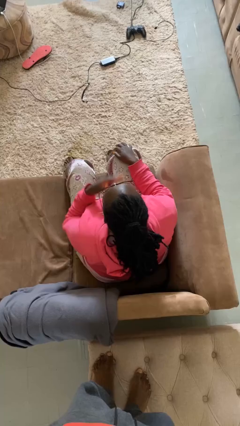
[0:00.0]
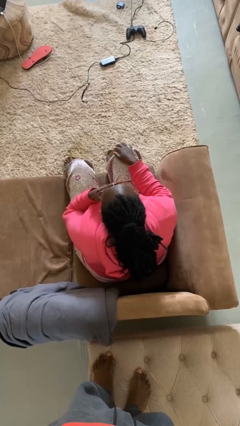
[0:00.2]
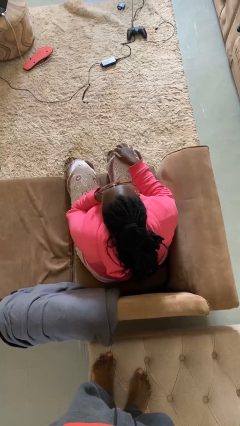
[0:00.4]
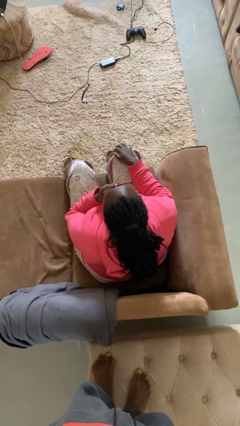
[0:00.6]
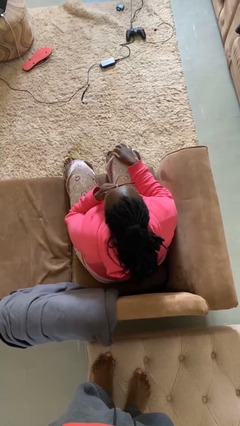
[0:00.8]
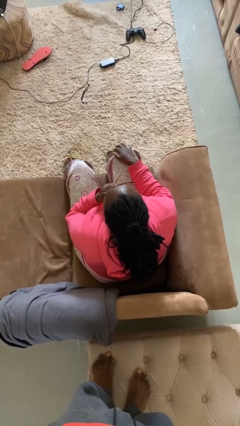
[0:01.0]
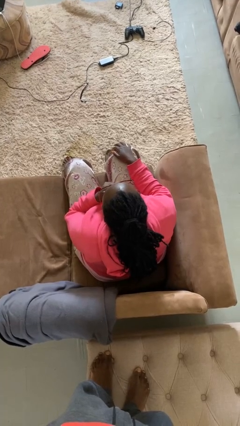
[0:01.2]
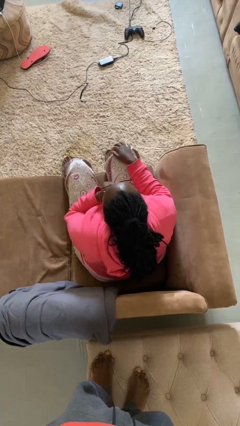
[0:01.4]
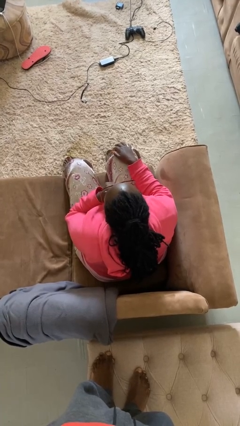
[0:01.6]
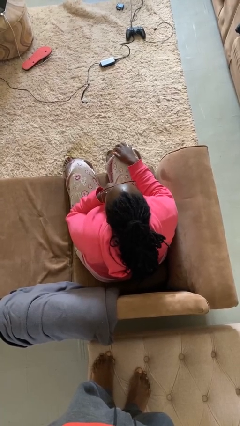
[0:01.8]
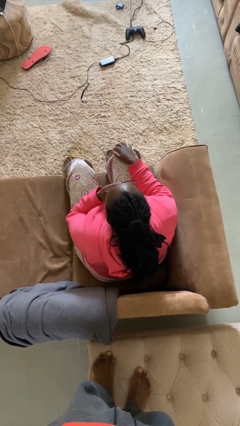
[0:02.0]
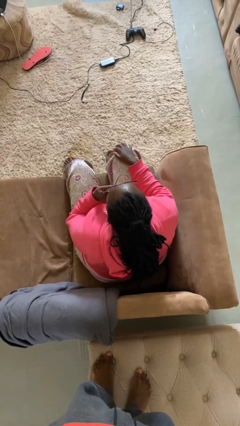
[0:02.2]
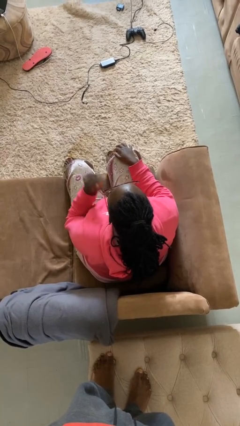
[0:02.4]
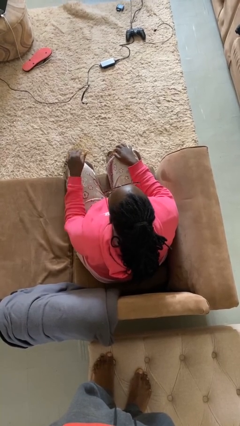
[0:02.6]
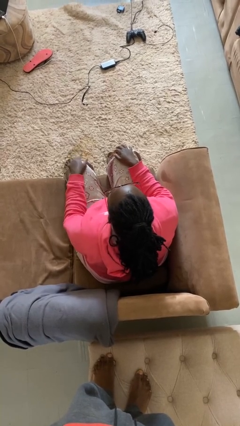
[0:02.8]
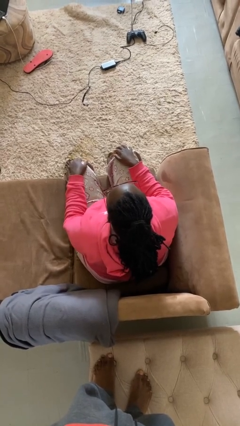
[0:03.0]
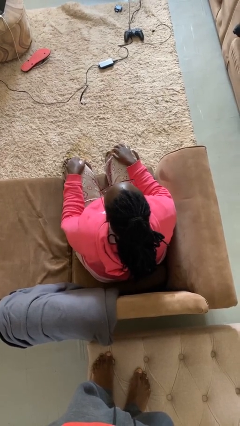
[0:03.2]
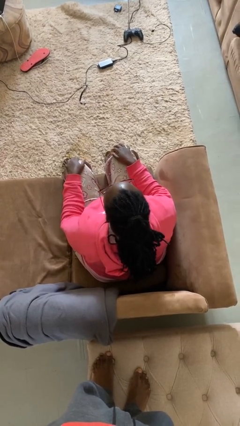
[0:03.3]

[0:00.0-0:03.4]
person strokes chin

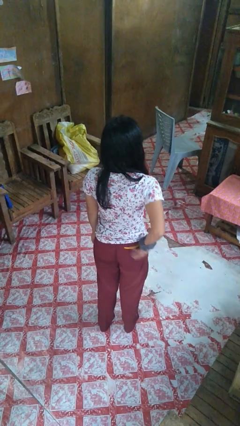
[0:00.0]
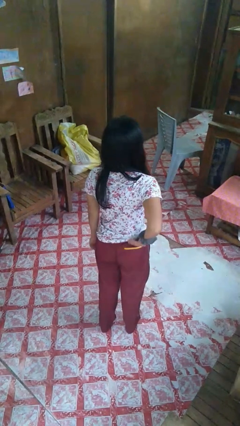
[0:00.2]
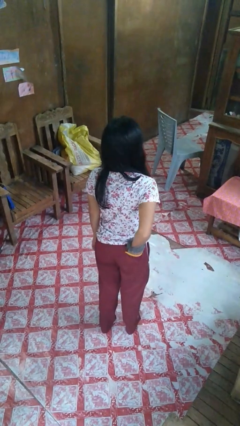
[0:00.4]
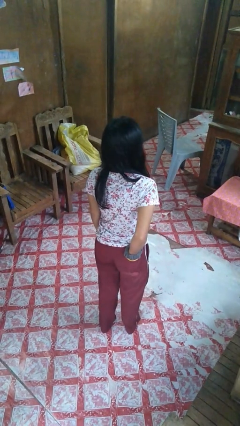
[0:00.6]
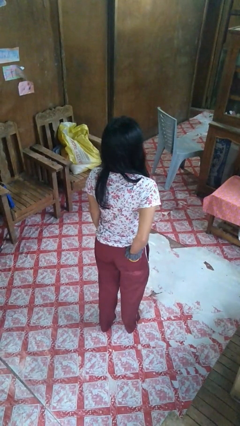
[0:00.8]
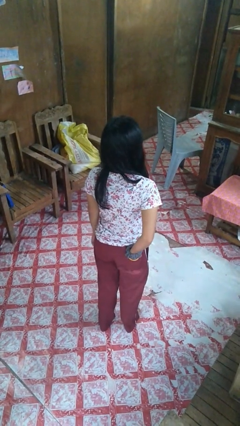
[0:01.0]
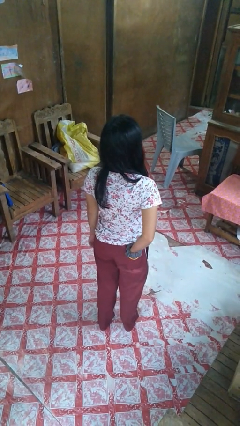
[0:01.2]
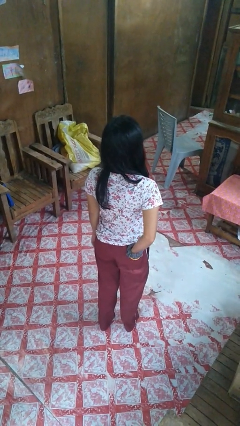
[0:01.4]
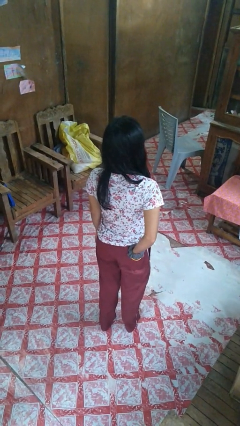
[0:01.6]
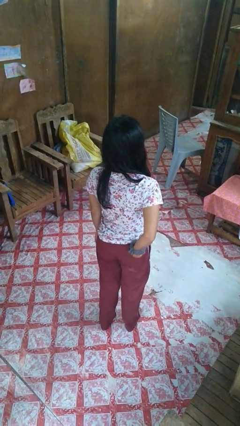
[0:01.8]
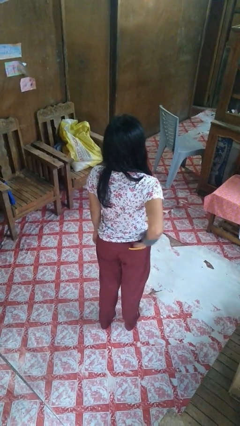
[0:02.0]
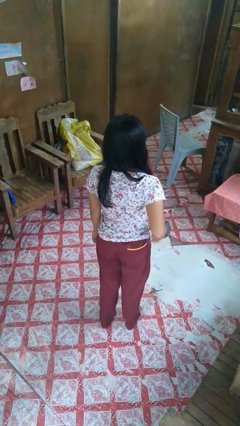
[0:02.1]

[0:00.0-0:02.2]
person puts hands in back pockets

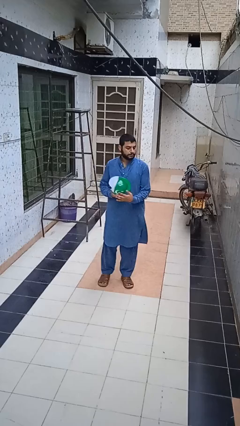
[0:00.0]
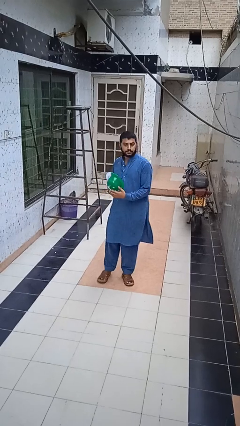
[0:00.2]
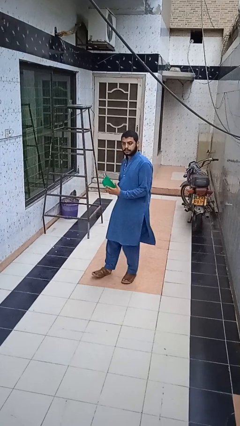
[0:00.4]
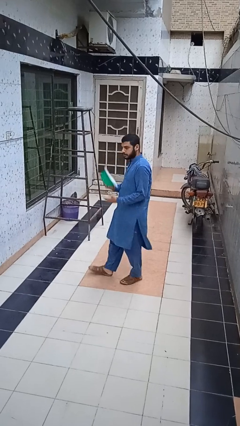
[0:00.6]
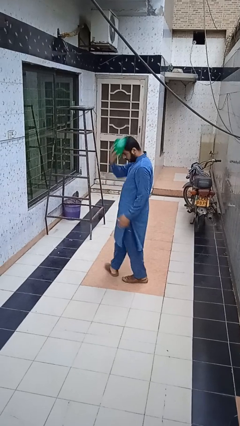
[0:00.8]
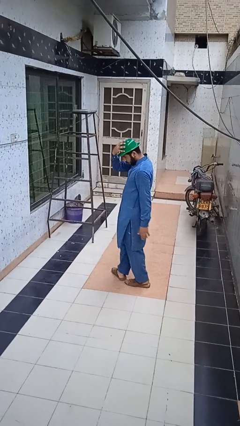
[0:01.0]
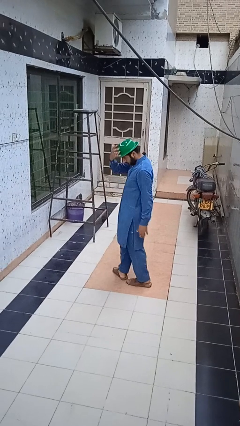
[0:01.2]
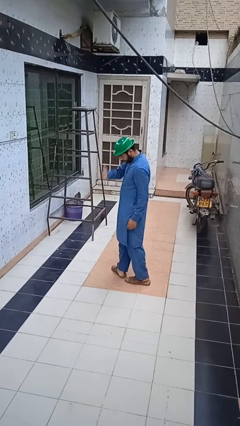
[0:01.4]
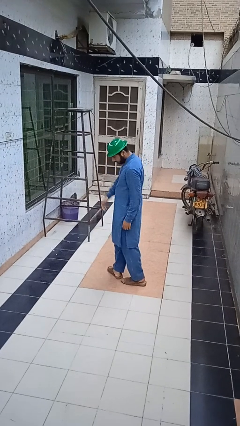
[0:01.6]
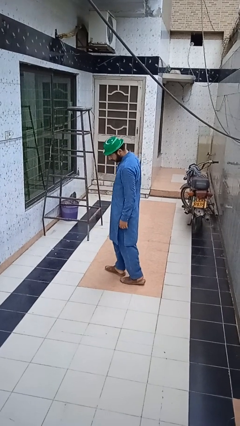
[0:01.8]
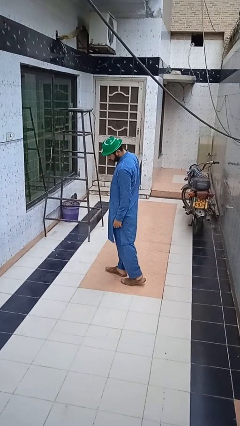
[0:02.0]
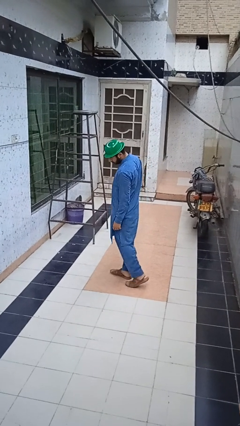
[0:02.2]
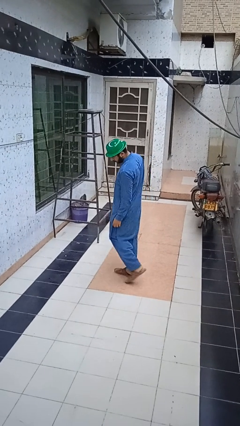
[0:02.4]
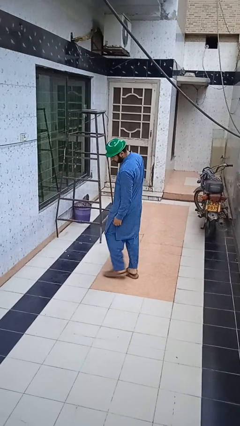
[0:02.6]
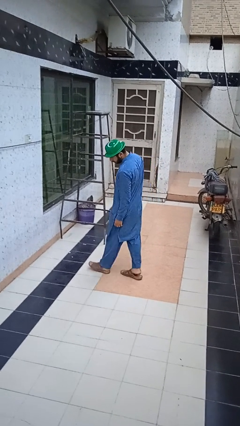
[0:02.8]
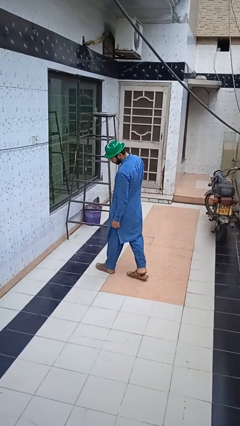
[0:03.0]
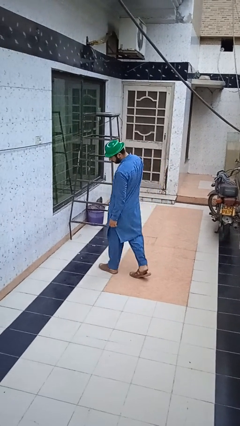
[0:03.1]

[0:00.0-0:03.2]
person puts on hat

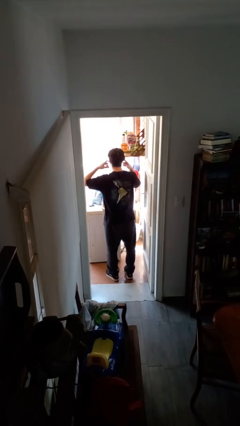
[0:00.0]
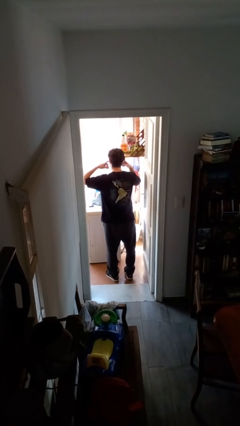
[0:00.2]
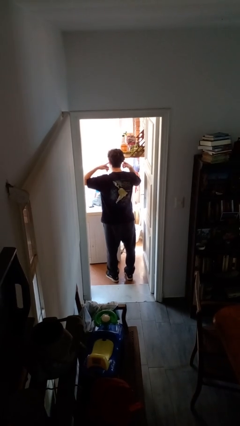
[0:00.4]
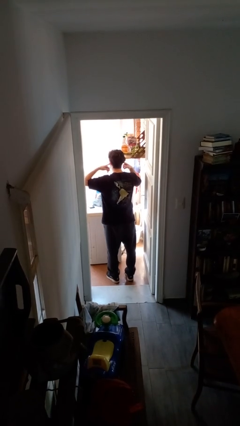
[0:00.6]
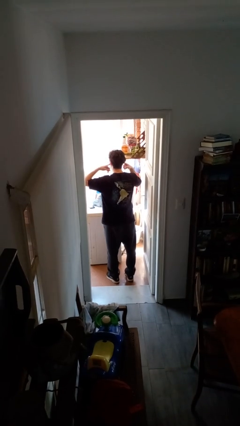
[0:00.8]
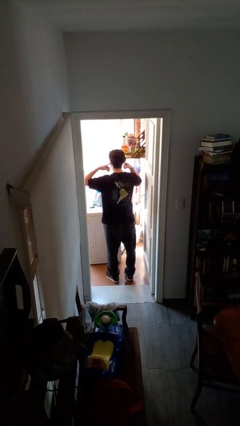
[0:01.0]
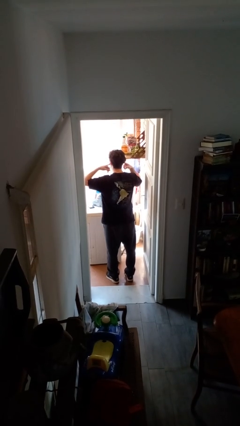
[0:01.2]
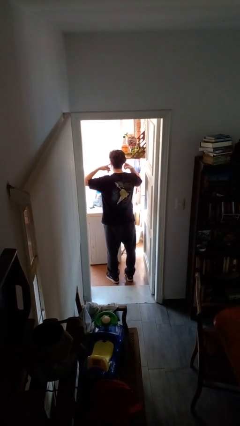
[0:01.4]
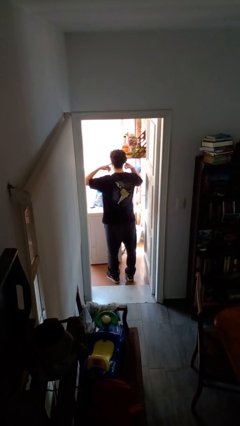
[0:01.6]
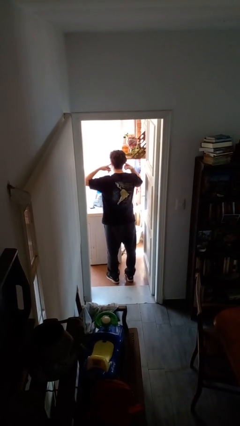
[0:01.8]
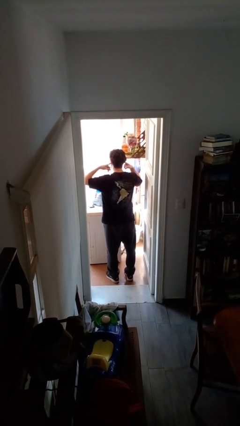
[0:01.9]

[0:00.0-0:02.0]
person puts fingers in ear

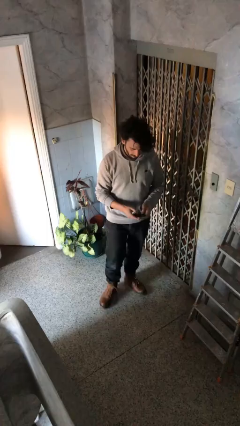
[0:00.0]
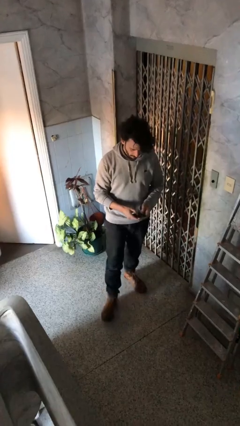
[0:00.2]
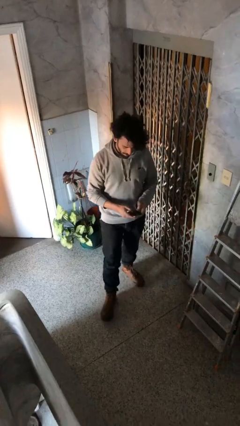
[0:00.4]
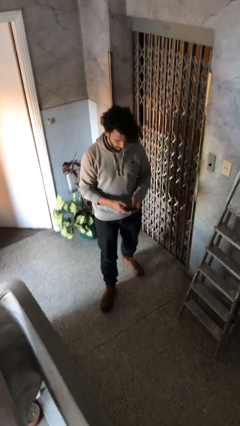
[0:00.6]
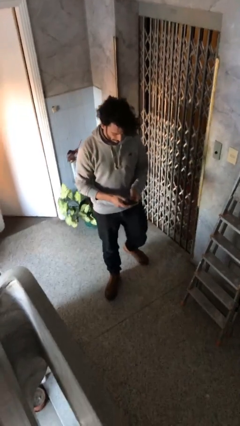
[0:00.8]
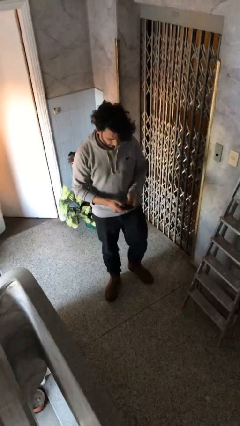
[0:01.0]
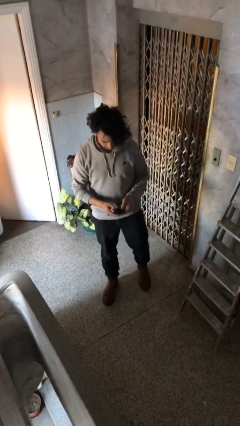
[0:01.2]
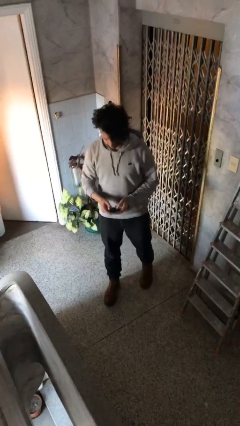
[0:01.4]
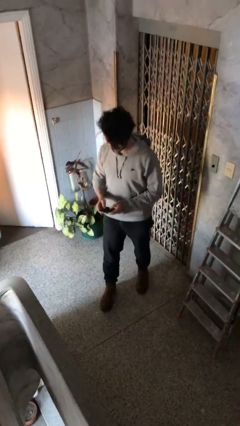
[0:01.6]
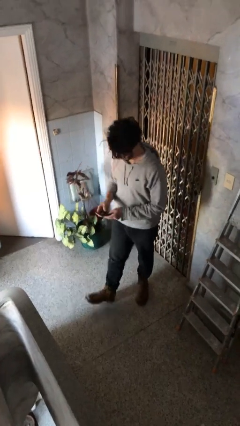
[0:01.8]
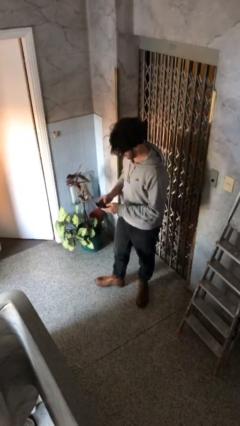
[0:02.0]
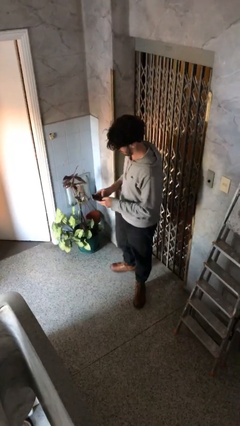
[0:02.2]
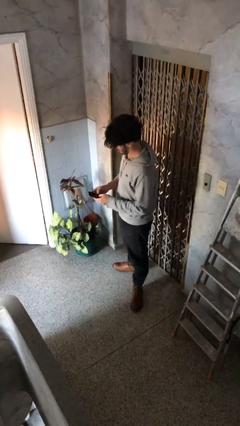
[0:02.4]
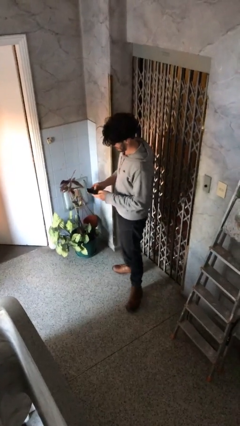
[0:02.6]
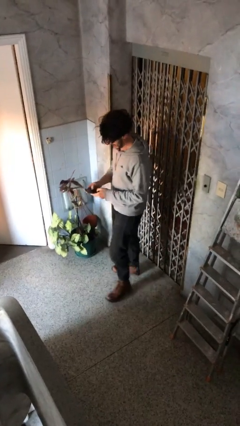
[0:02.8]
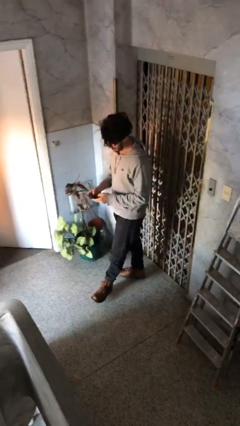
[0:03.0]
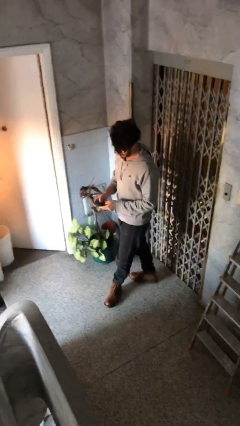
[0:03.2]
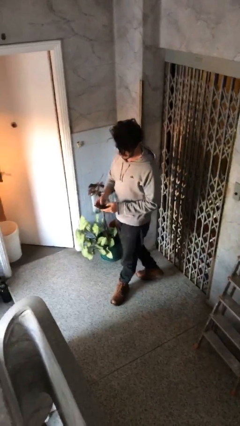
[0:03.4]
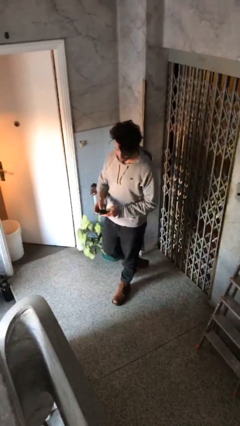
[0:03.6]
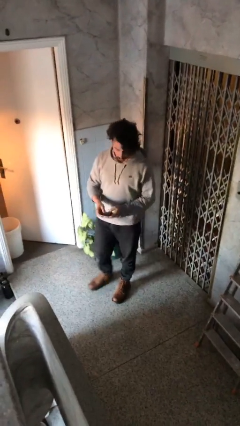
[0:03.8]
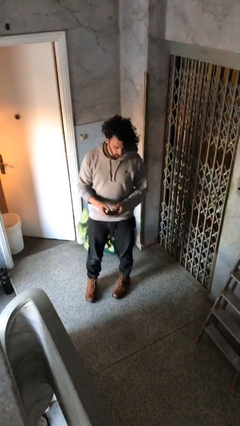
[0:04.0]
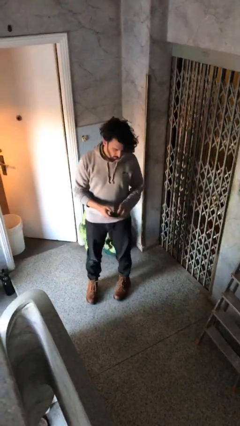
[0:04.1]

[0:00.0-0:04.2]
person texts on phone

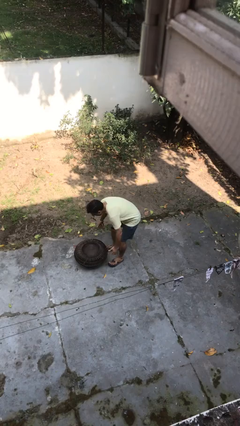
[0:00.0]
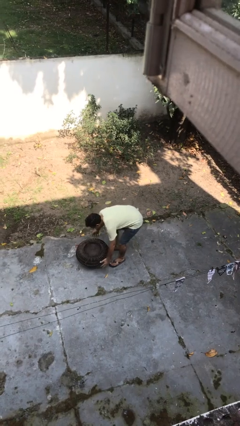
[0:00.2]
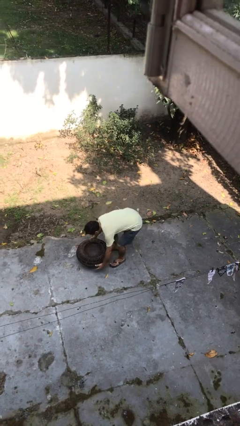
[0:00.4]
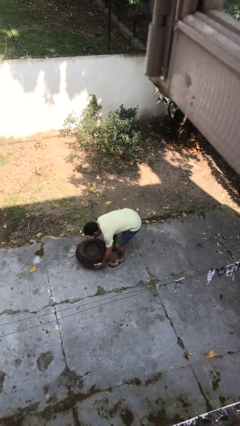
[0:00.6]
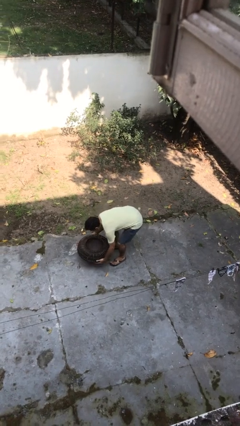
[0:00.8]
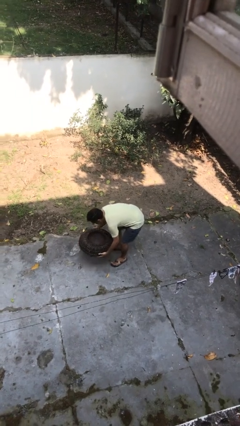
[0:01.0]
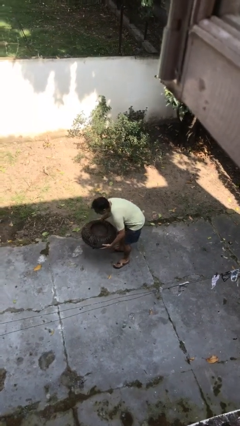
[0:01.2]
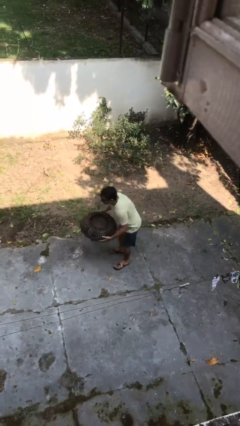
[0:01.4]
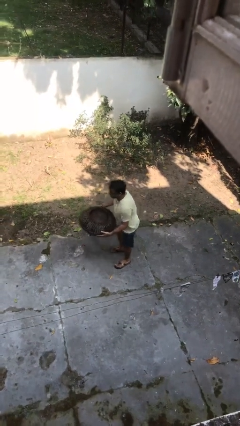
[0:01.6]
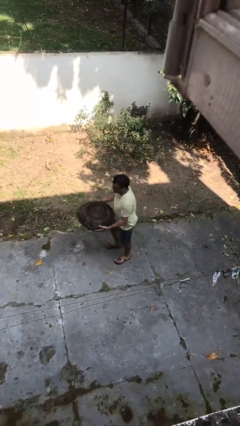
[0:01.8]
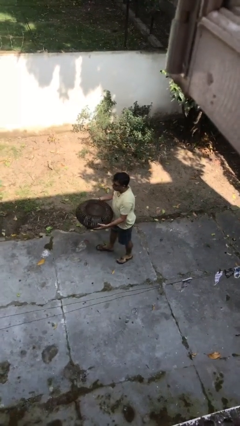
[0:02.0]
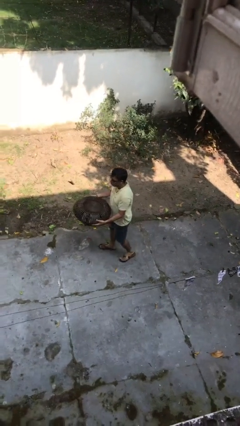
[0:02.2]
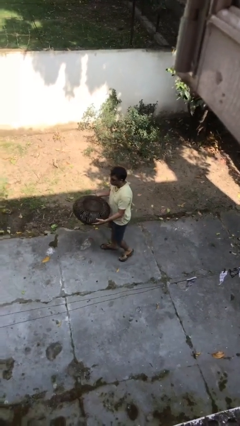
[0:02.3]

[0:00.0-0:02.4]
person picks up object from floor

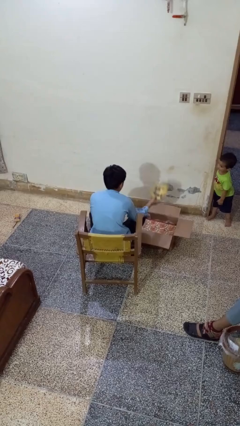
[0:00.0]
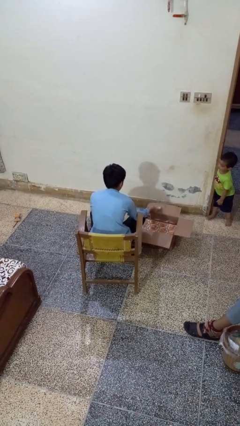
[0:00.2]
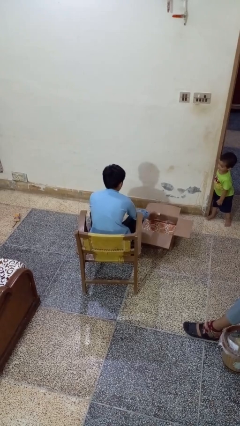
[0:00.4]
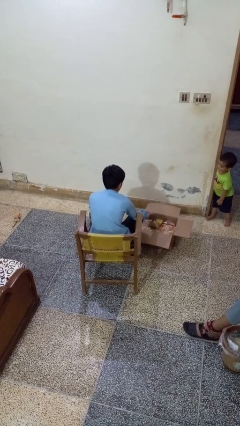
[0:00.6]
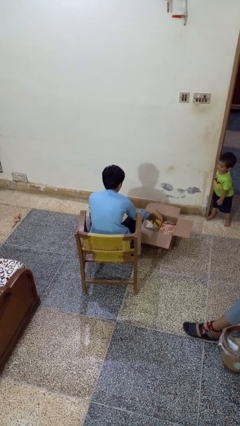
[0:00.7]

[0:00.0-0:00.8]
person puts object into box
